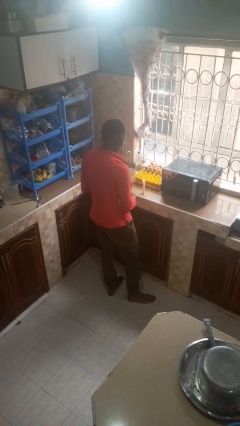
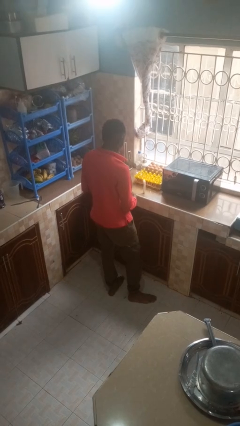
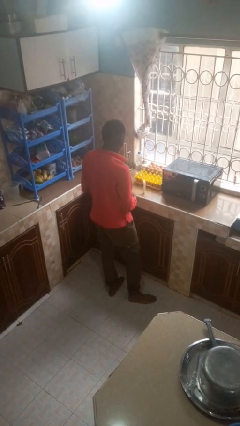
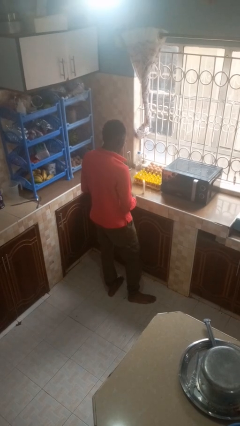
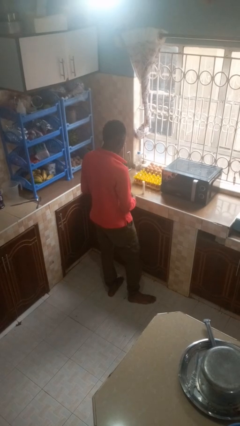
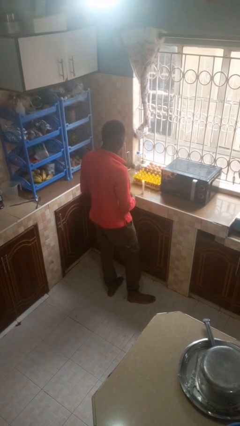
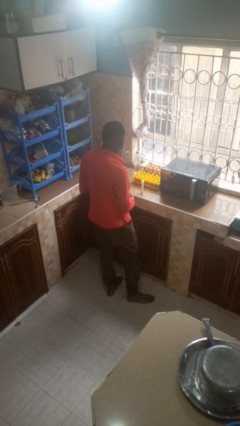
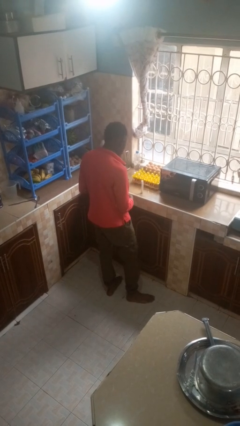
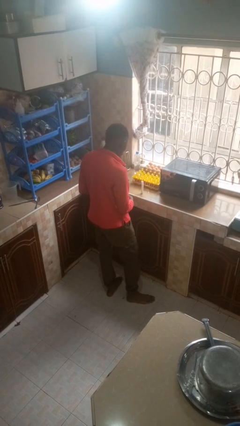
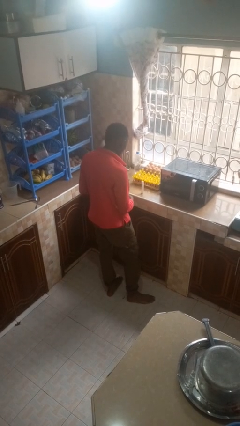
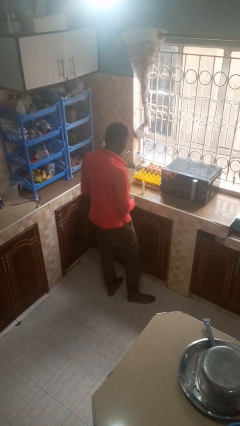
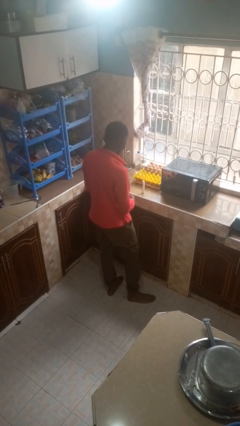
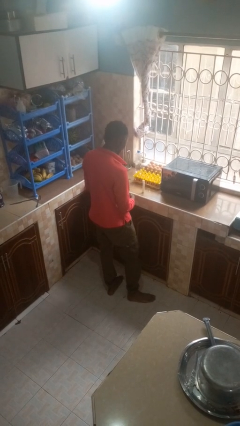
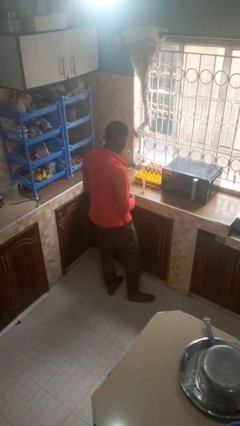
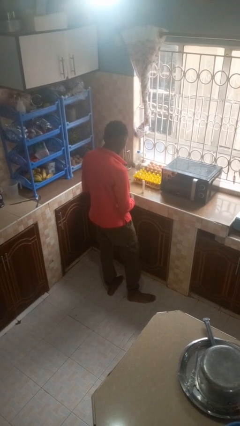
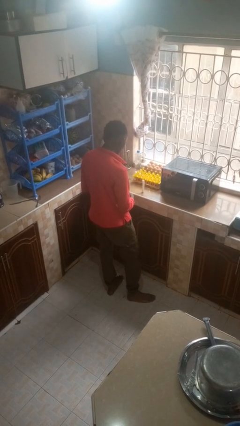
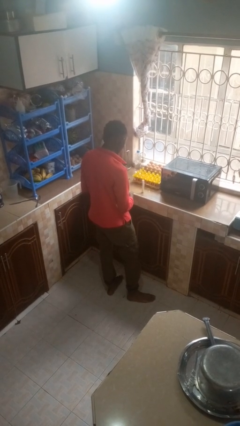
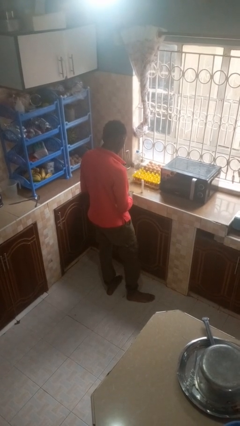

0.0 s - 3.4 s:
person extinguishes candle

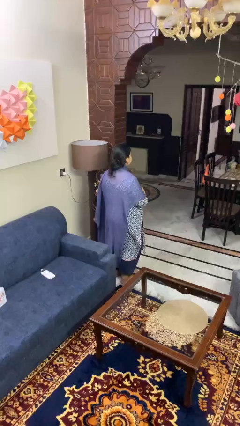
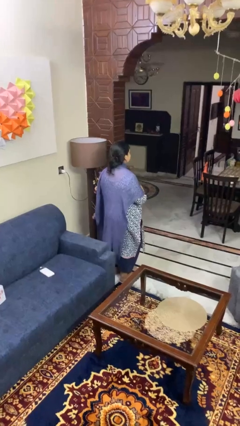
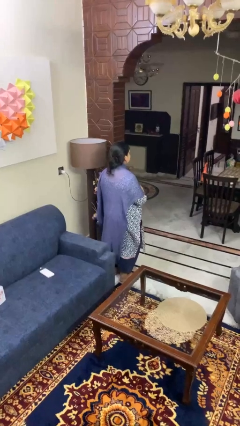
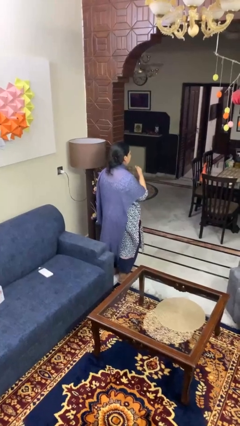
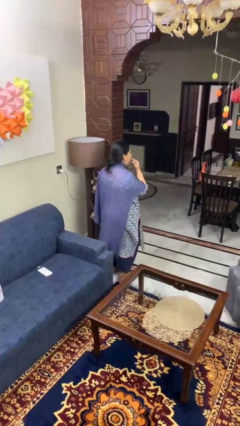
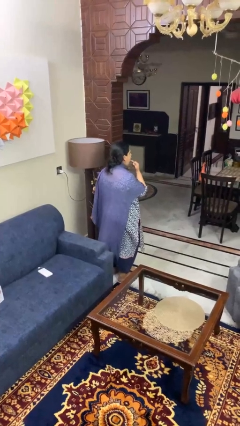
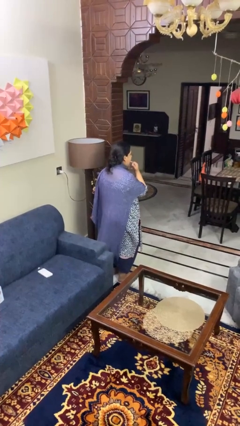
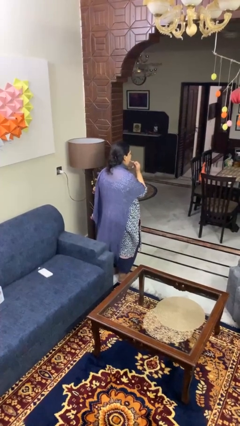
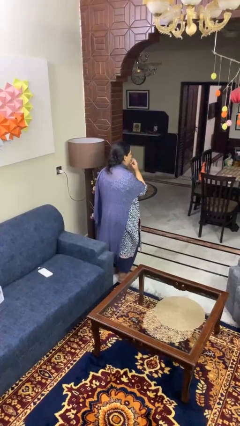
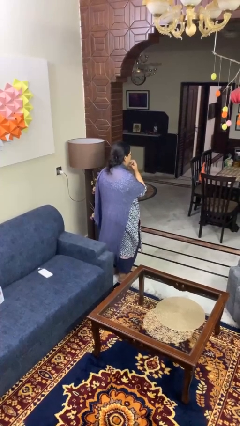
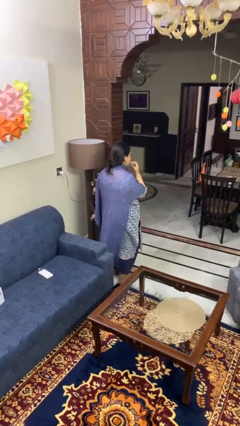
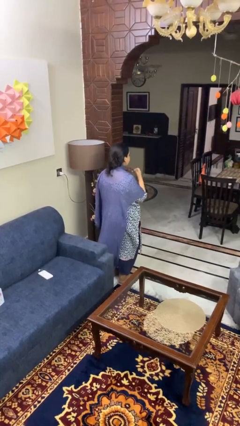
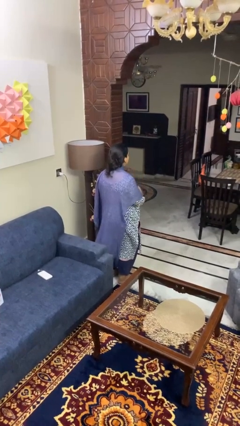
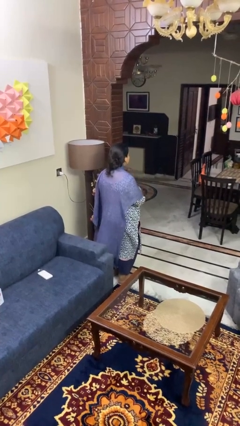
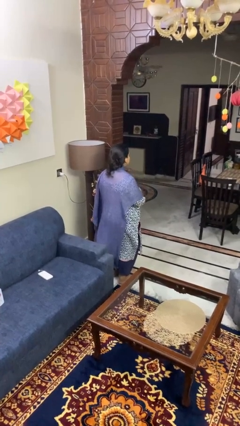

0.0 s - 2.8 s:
person licks fingers

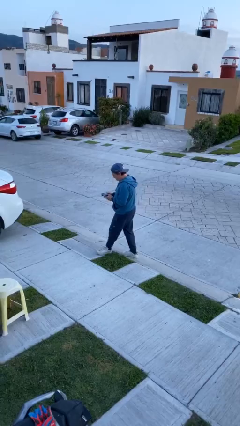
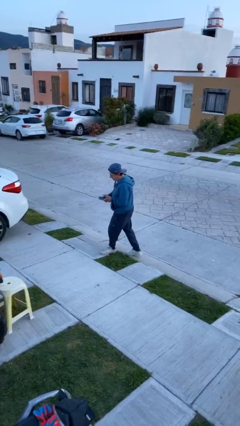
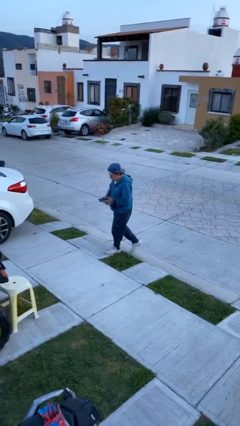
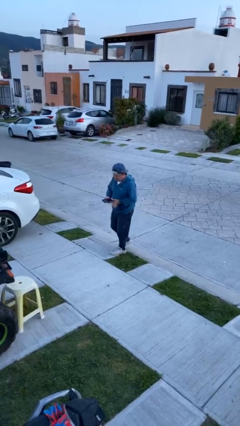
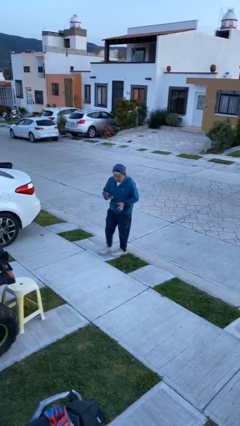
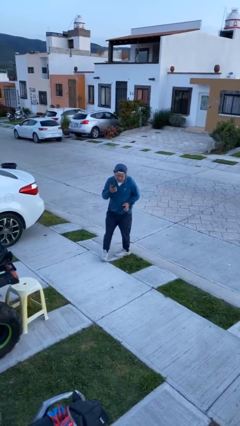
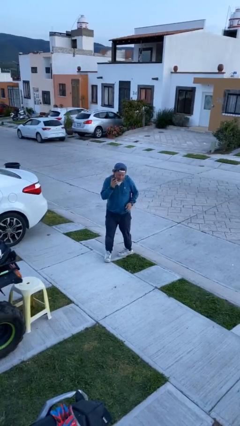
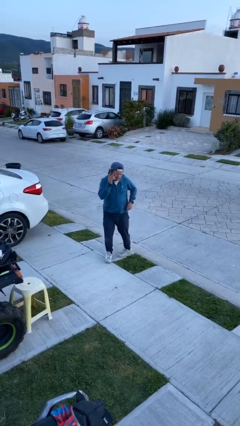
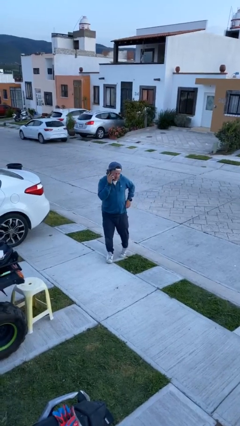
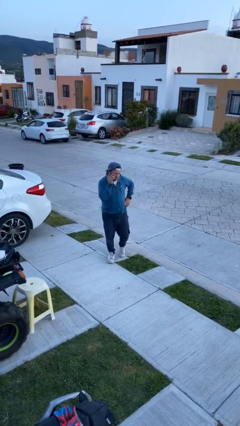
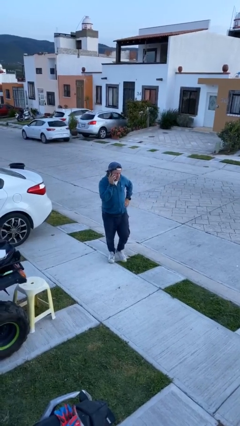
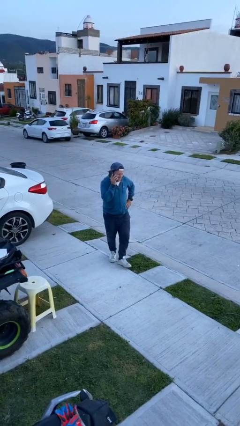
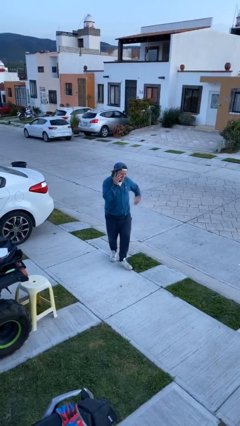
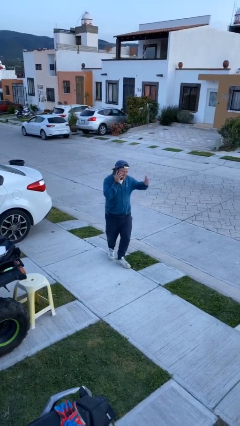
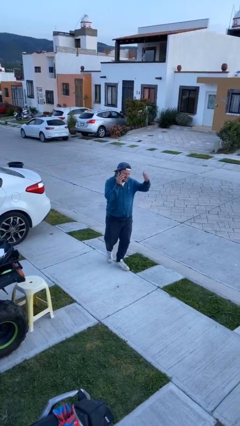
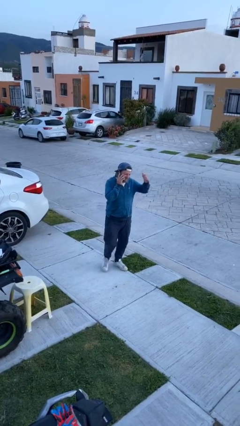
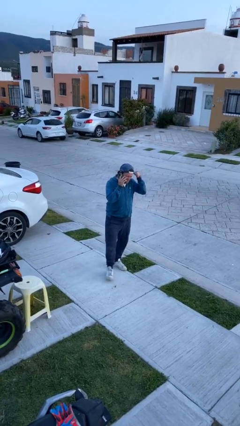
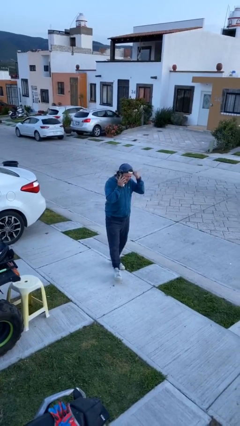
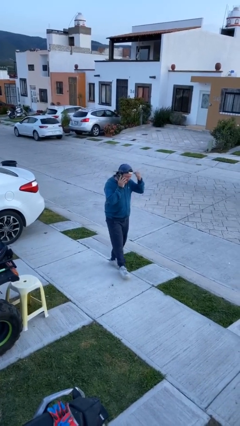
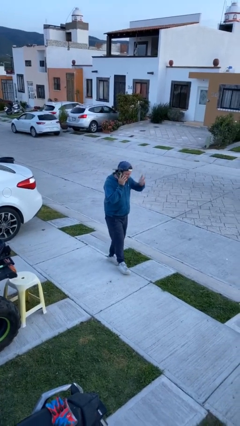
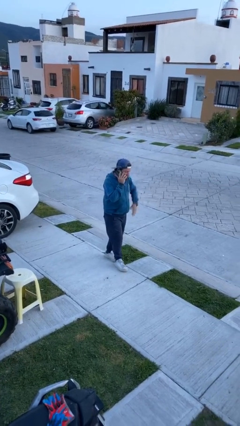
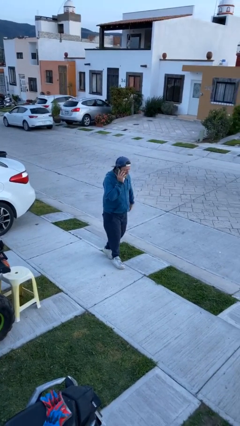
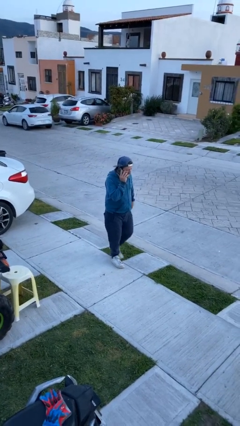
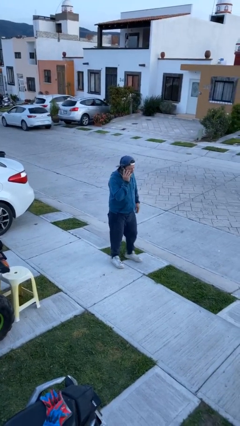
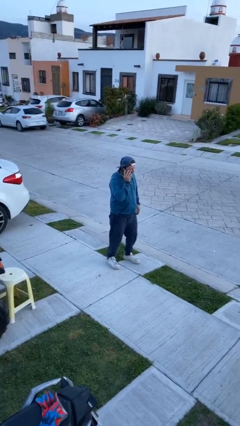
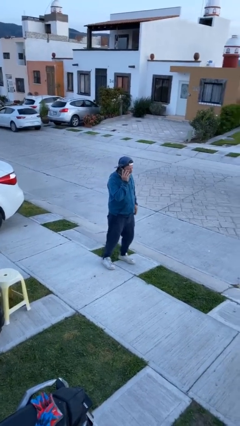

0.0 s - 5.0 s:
person talks on phone

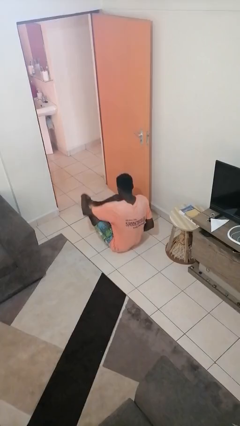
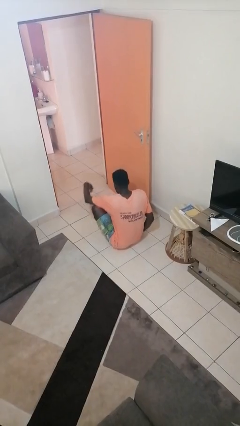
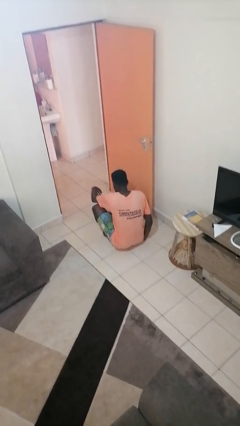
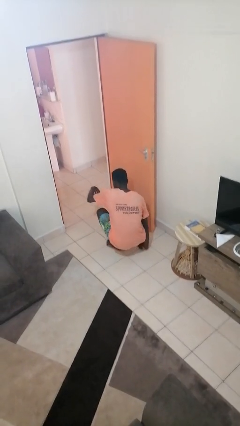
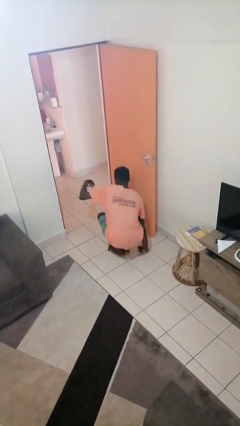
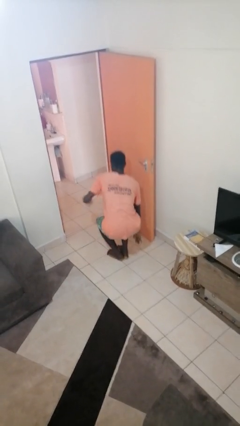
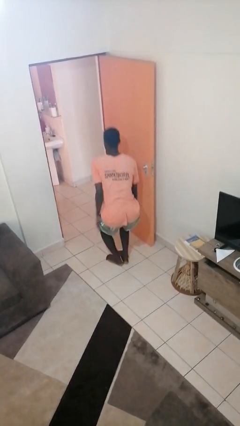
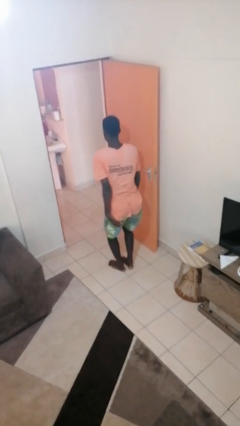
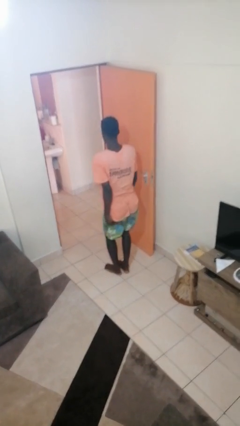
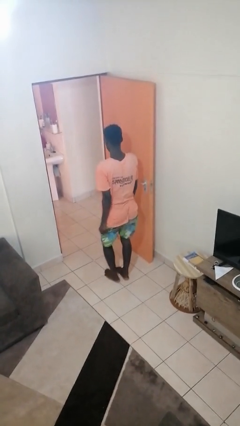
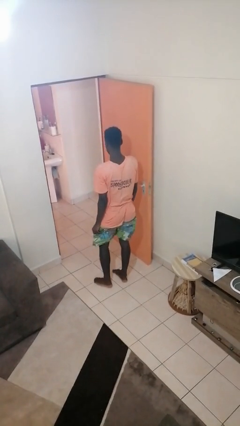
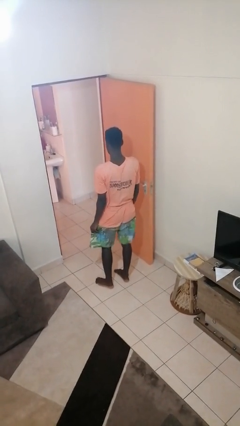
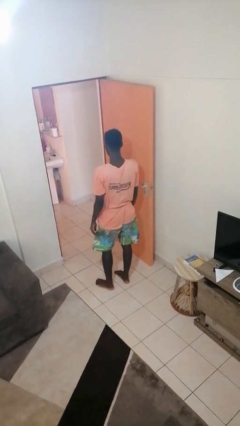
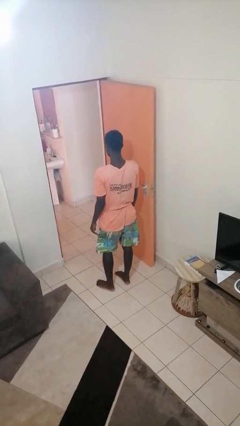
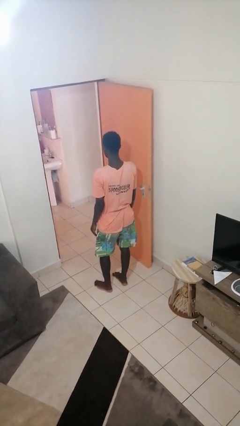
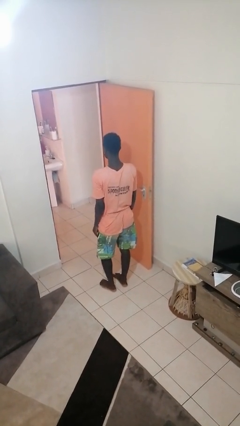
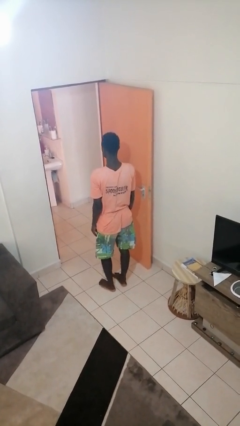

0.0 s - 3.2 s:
person stands up from floor

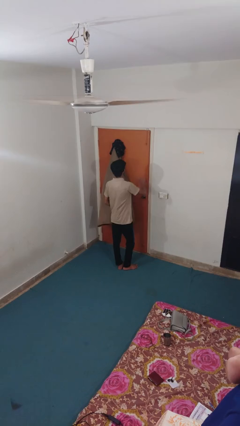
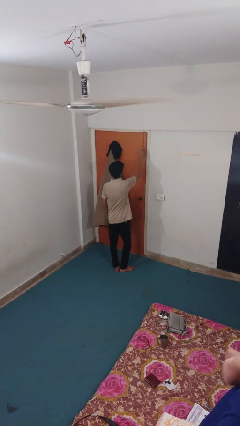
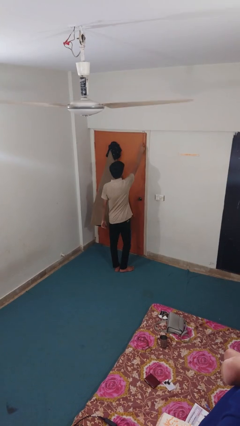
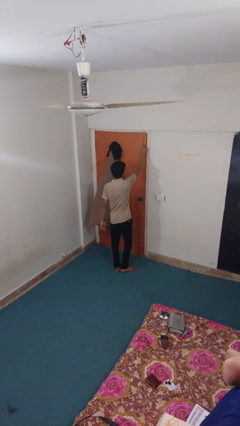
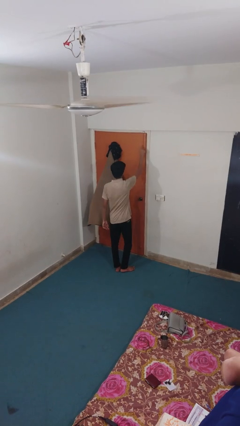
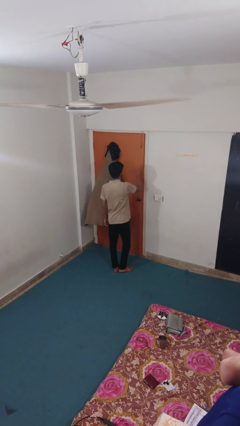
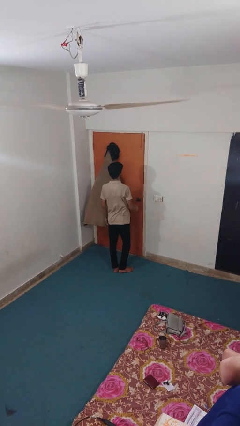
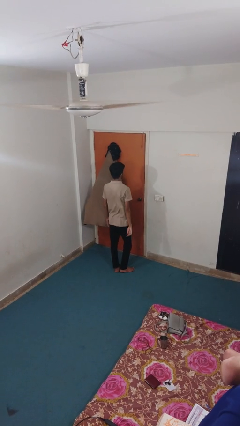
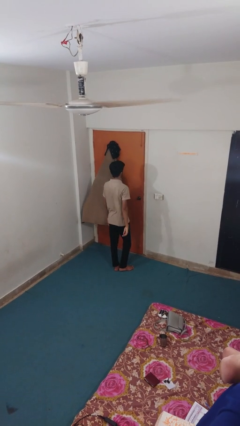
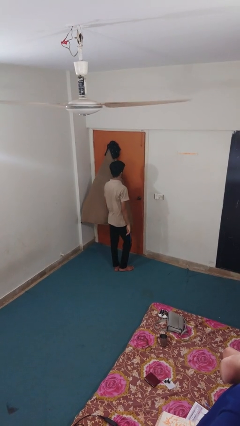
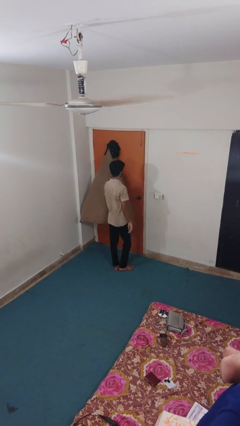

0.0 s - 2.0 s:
person unlocks door with keys

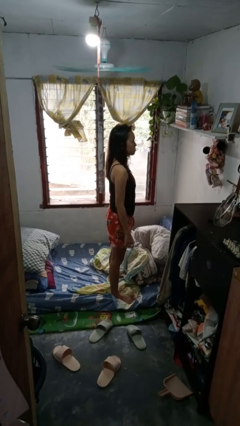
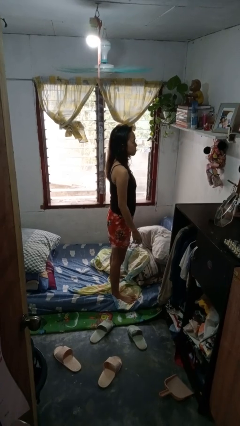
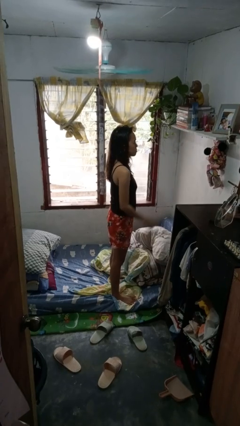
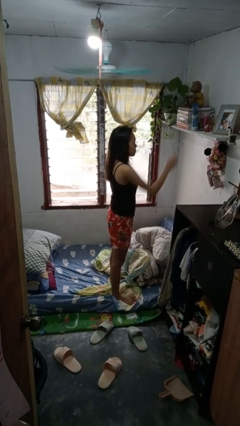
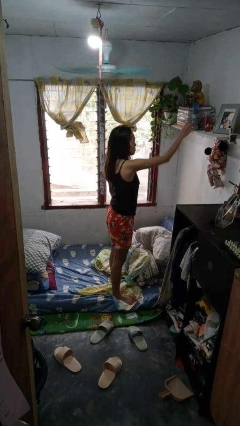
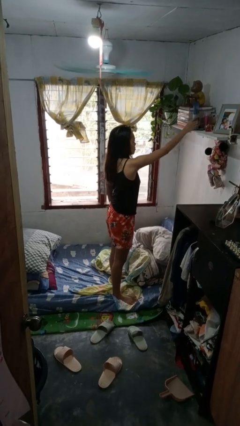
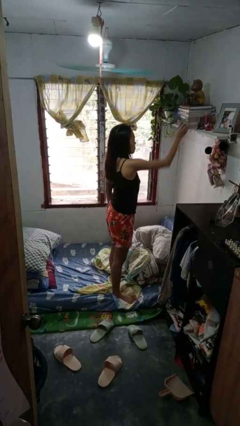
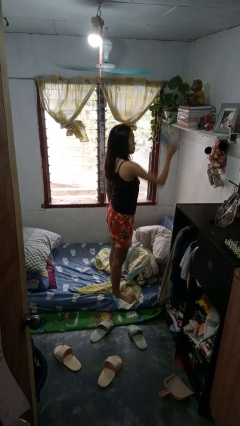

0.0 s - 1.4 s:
person picks up object from shelf

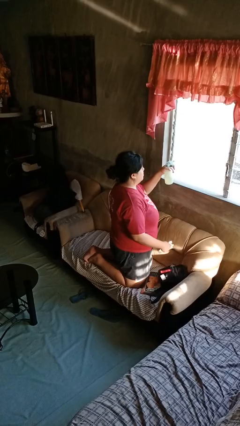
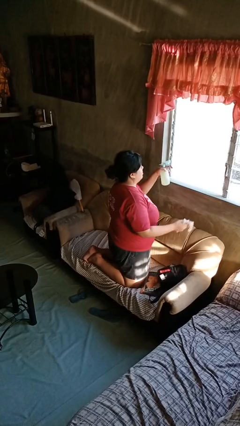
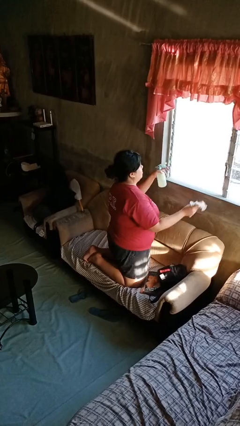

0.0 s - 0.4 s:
person sprays from bottle
